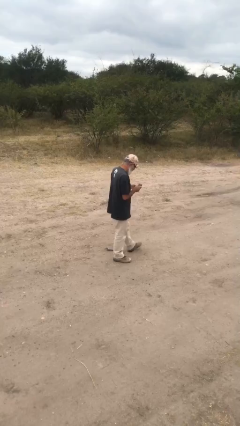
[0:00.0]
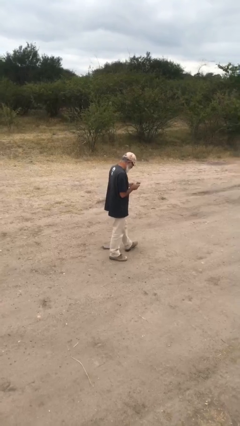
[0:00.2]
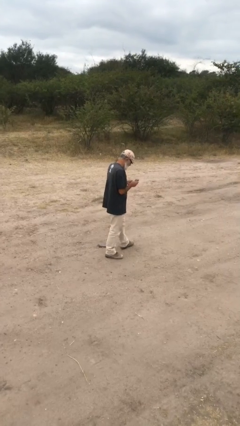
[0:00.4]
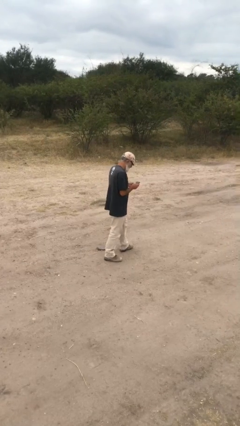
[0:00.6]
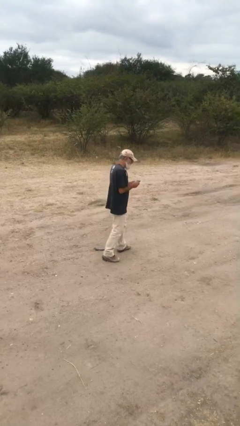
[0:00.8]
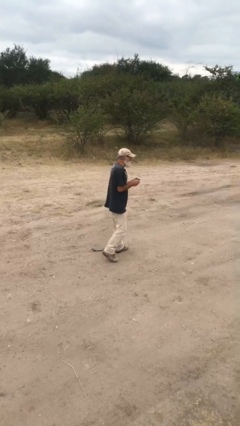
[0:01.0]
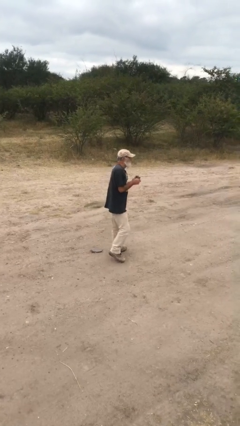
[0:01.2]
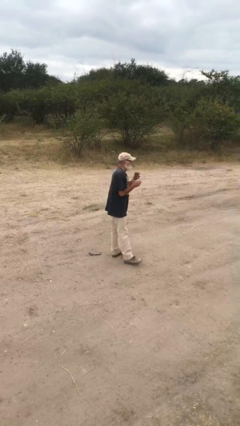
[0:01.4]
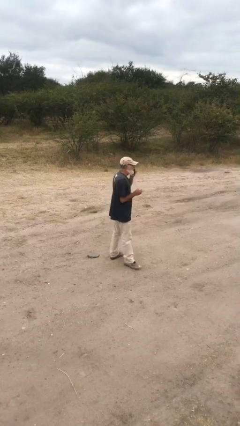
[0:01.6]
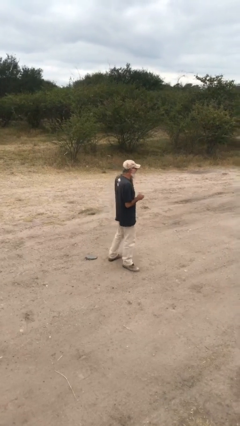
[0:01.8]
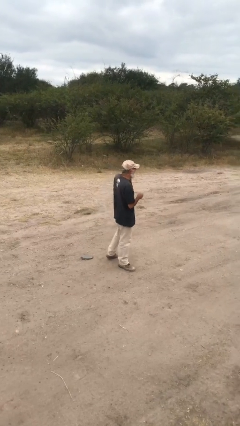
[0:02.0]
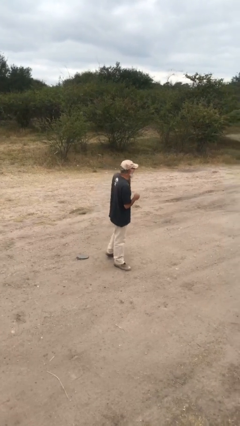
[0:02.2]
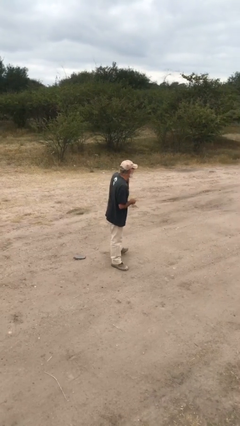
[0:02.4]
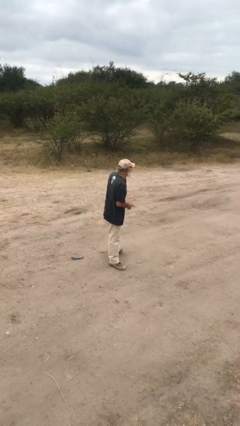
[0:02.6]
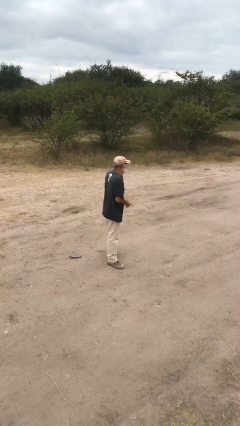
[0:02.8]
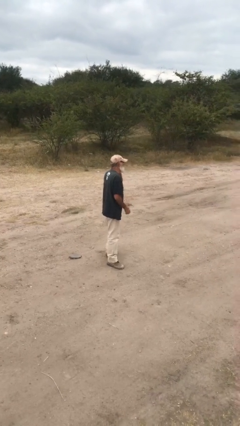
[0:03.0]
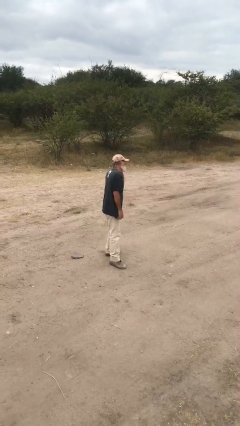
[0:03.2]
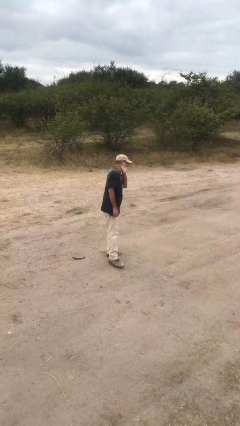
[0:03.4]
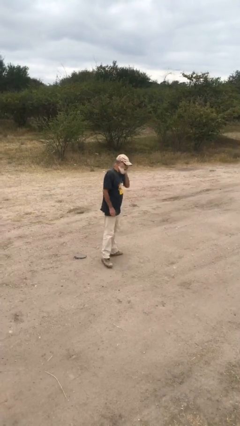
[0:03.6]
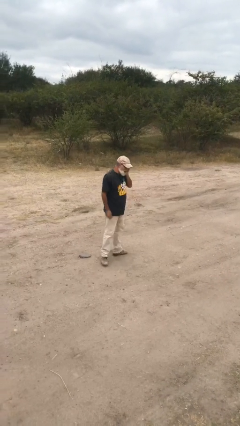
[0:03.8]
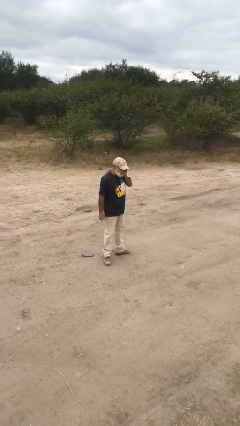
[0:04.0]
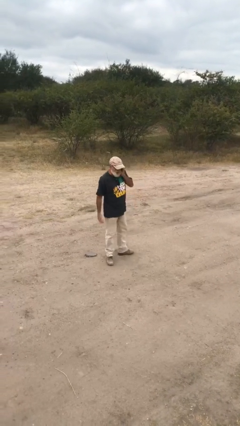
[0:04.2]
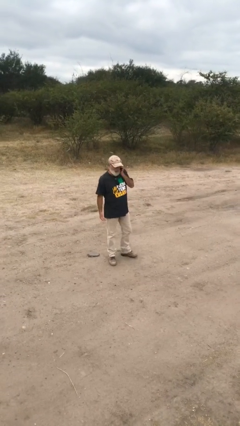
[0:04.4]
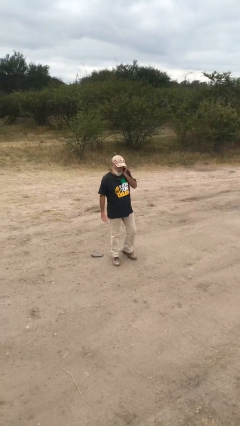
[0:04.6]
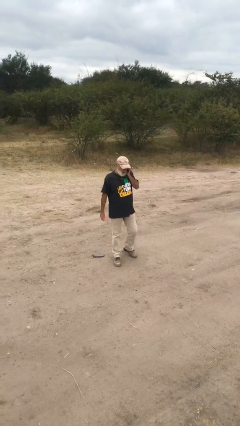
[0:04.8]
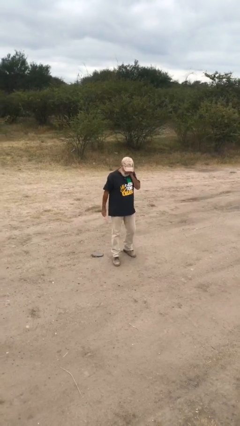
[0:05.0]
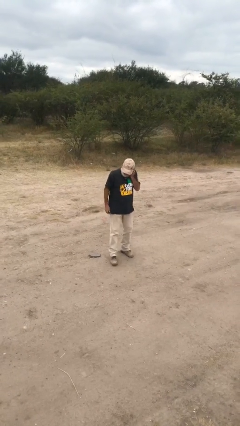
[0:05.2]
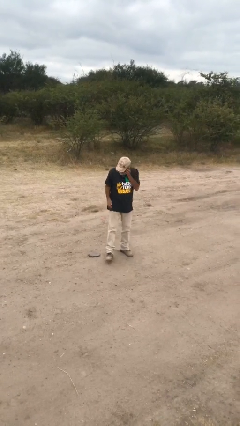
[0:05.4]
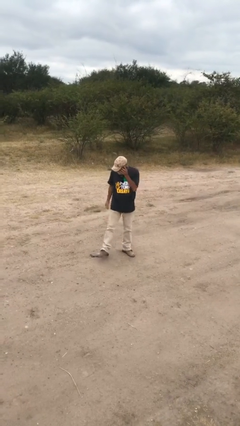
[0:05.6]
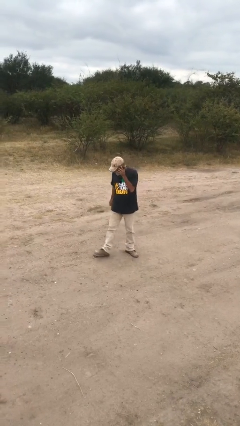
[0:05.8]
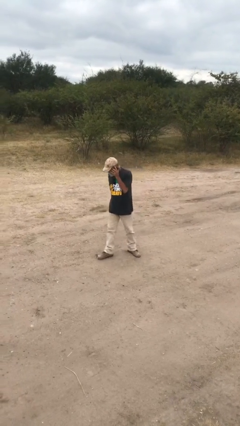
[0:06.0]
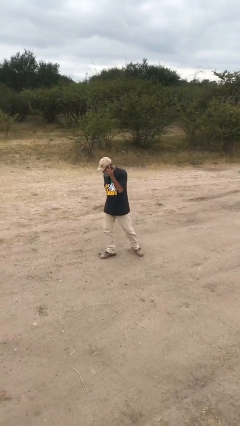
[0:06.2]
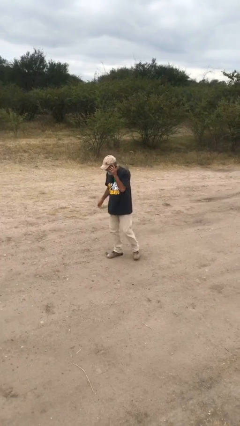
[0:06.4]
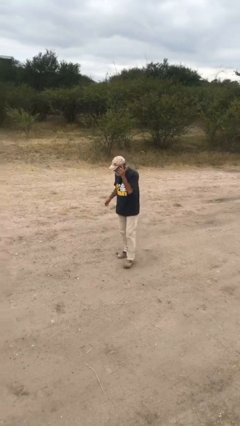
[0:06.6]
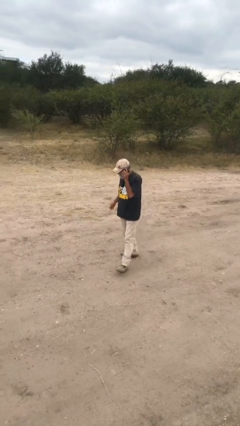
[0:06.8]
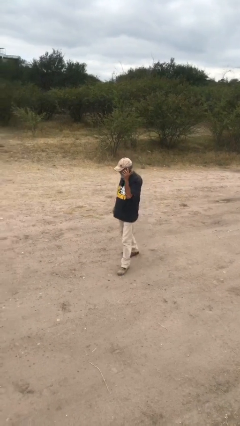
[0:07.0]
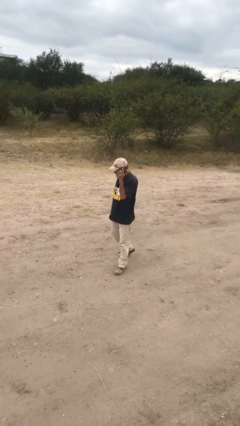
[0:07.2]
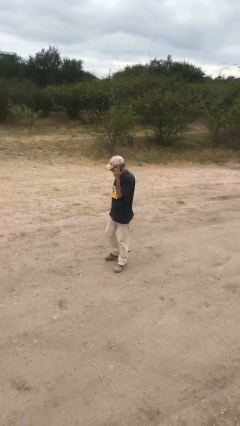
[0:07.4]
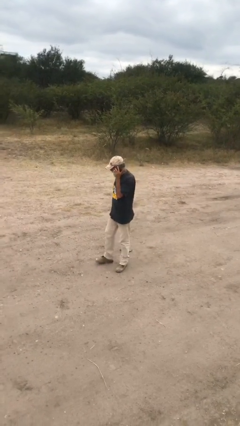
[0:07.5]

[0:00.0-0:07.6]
person talks on phone

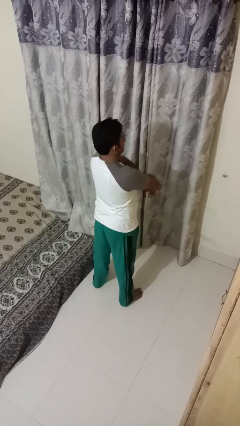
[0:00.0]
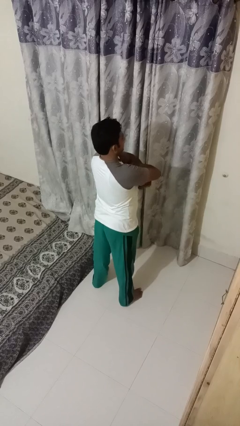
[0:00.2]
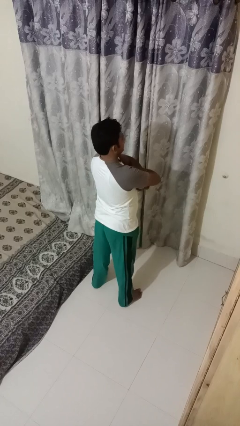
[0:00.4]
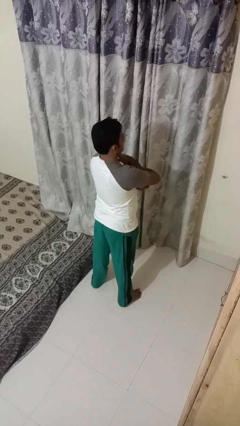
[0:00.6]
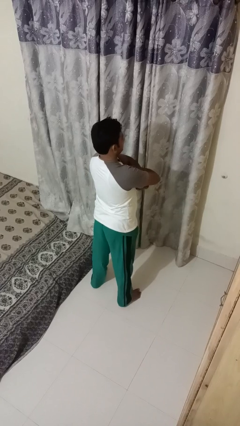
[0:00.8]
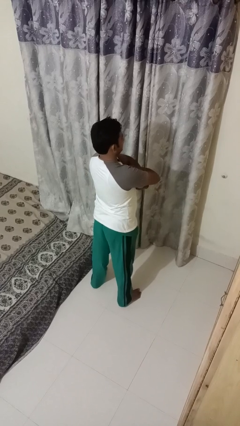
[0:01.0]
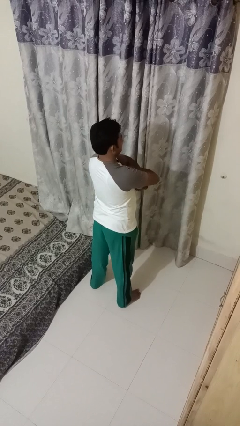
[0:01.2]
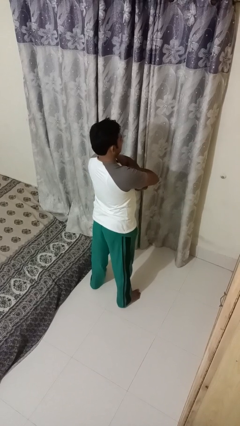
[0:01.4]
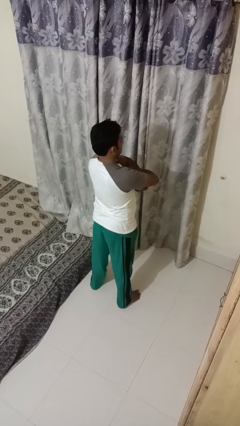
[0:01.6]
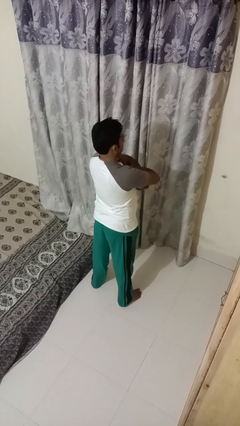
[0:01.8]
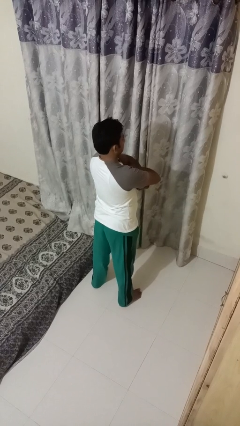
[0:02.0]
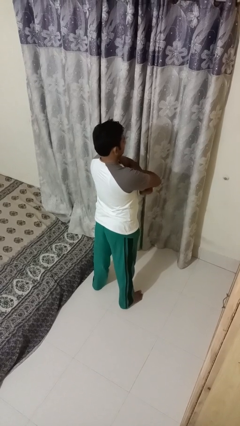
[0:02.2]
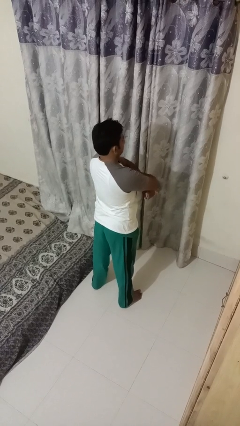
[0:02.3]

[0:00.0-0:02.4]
person gestures arms x

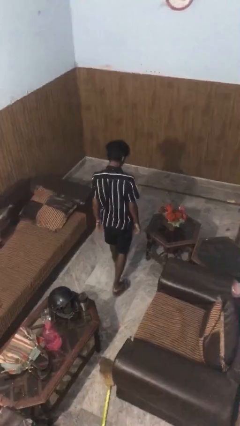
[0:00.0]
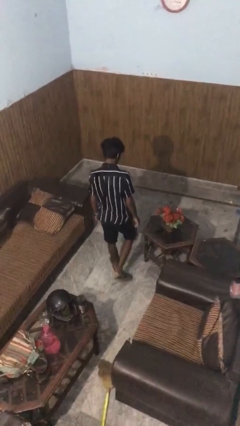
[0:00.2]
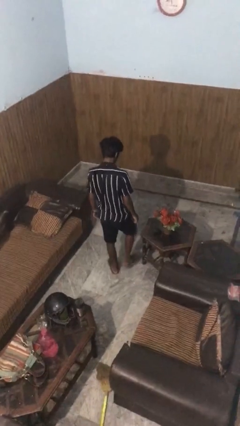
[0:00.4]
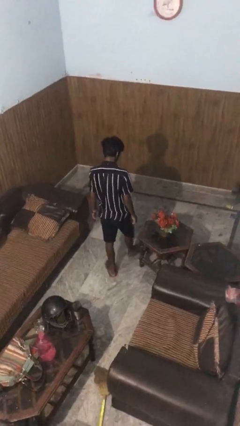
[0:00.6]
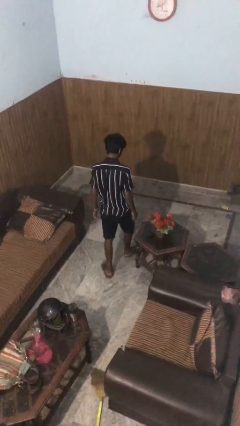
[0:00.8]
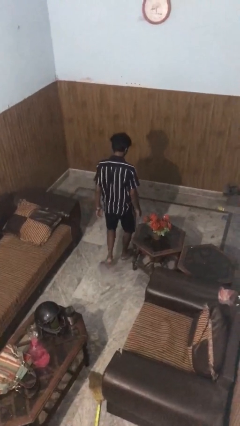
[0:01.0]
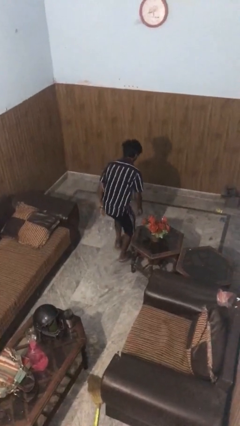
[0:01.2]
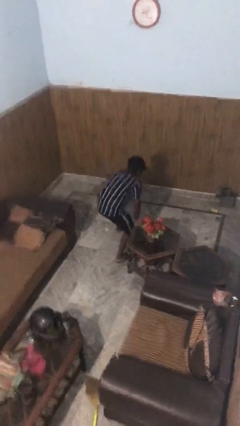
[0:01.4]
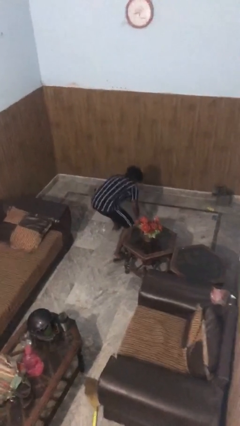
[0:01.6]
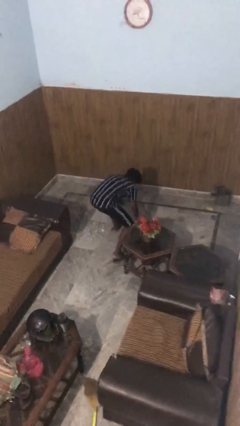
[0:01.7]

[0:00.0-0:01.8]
person trips on object on floor

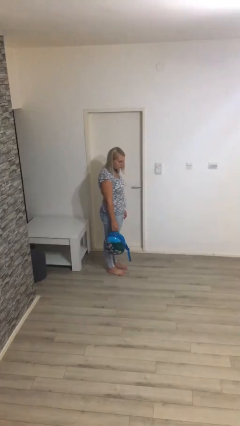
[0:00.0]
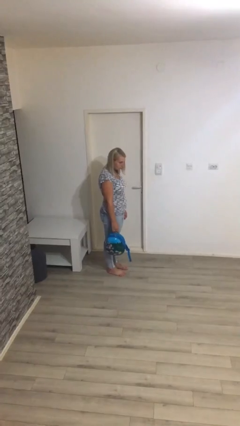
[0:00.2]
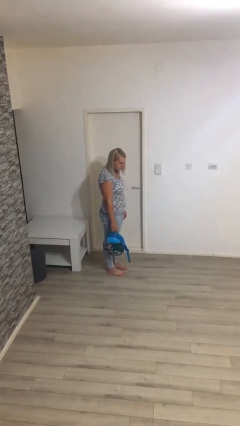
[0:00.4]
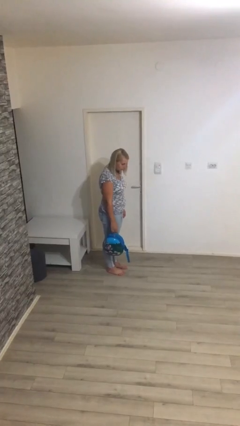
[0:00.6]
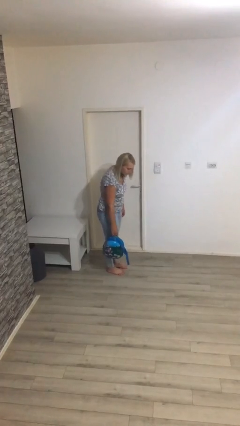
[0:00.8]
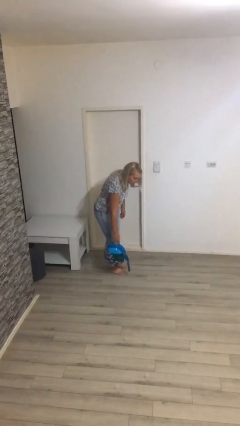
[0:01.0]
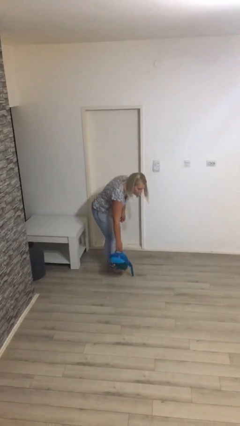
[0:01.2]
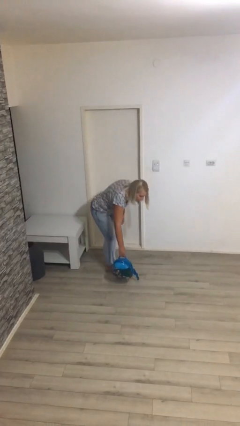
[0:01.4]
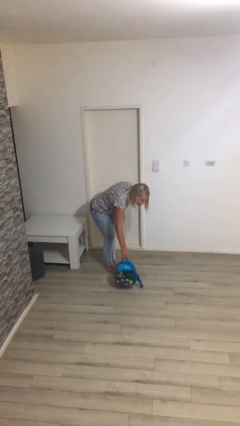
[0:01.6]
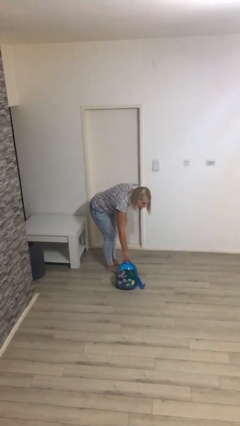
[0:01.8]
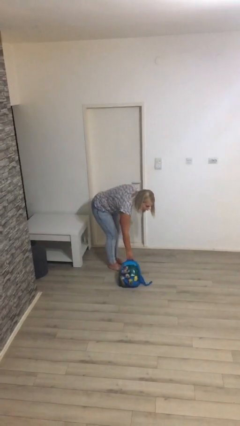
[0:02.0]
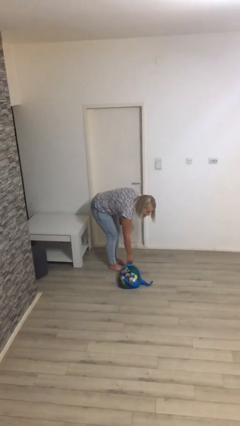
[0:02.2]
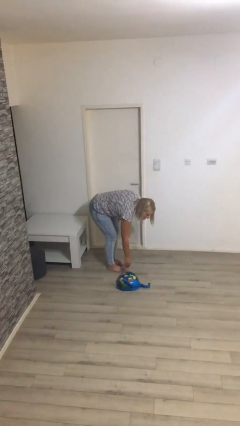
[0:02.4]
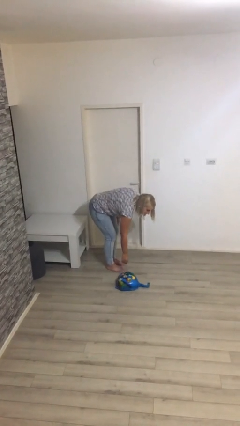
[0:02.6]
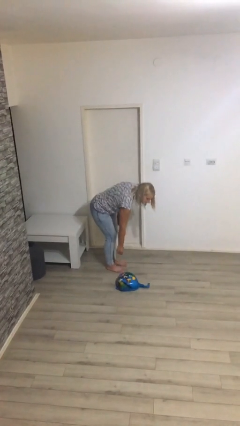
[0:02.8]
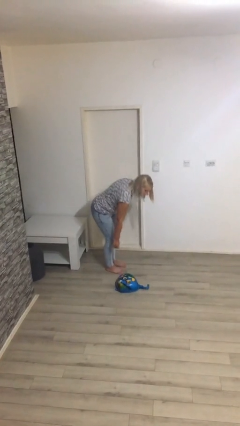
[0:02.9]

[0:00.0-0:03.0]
person puts down object on floor

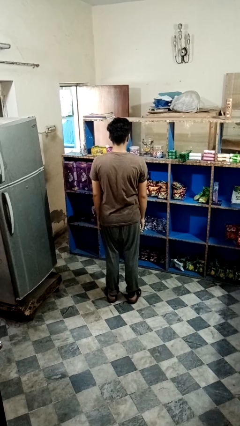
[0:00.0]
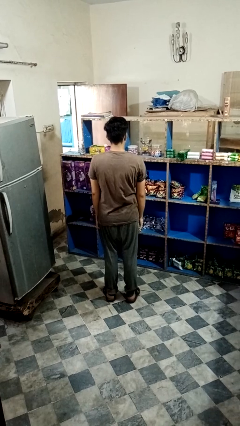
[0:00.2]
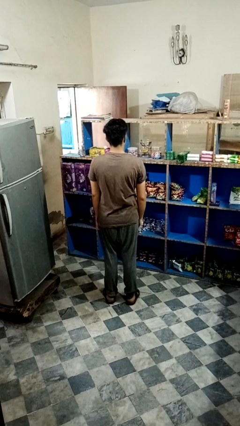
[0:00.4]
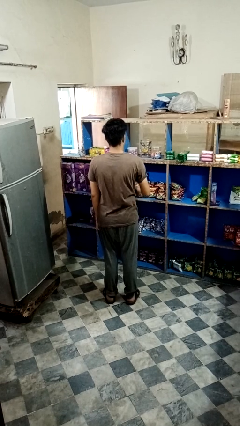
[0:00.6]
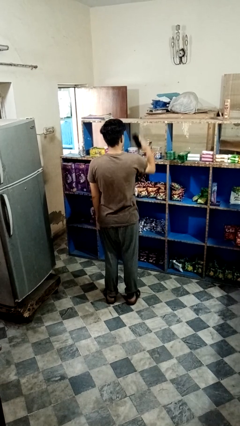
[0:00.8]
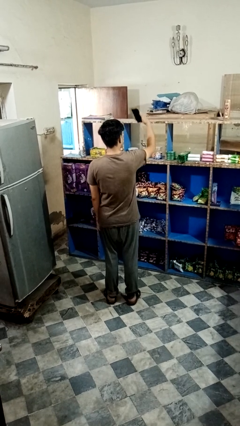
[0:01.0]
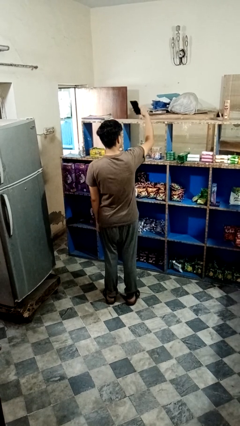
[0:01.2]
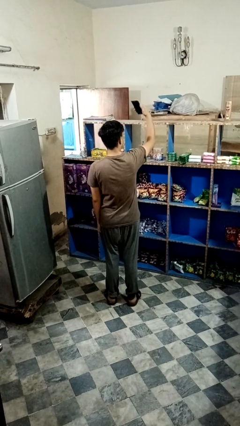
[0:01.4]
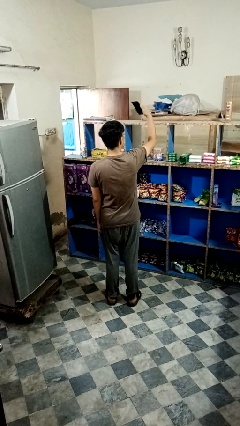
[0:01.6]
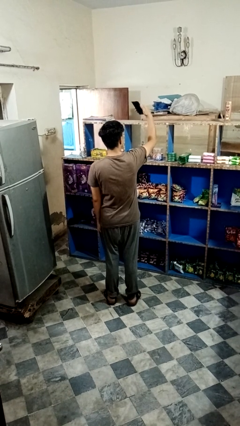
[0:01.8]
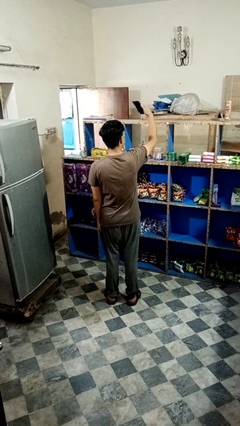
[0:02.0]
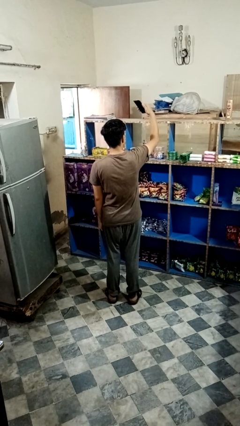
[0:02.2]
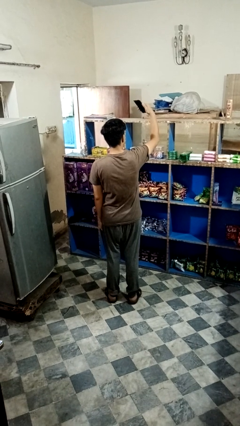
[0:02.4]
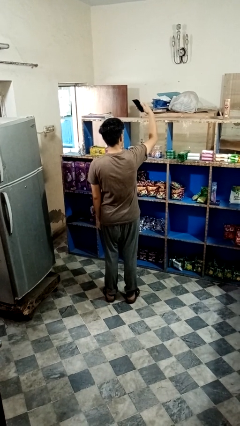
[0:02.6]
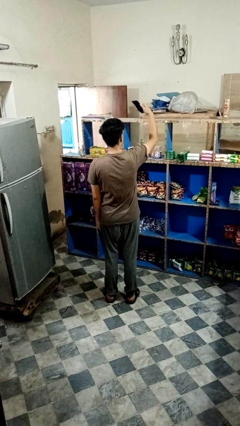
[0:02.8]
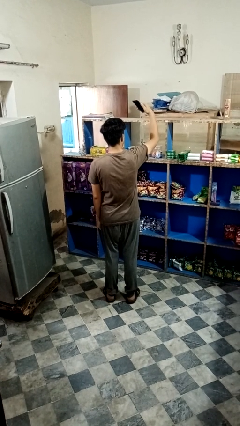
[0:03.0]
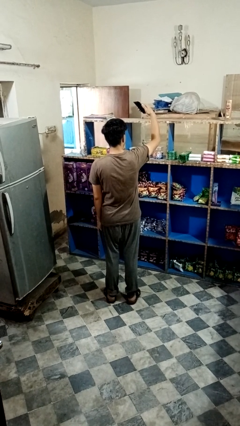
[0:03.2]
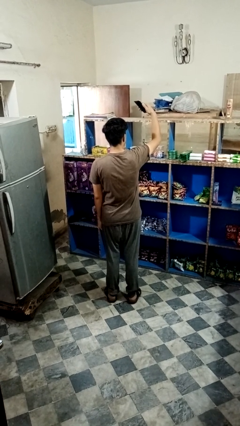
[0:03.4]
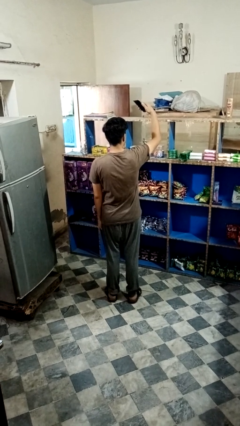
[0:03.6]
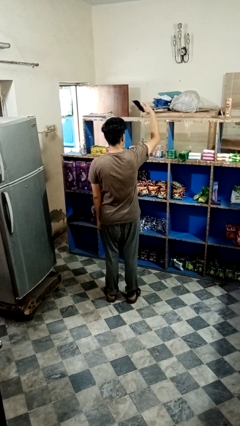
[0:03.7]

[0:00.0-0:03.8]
person takes selfie
